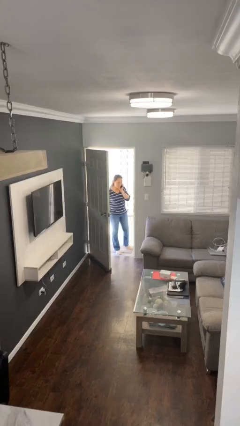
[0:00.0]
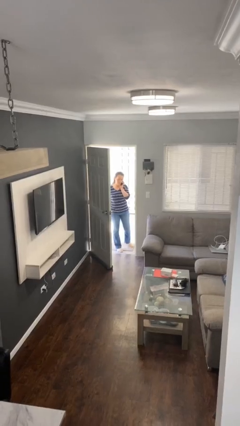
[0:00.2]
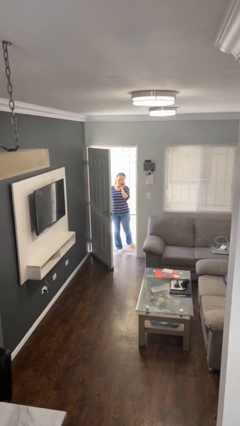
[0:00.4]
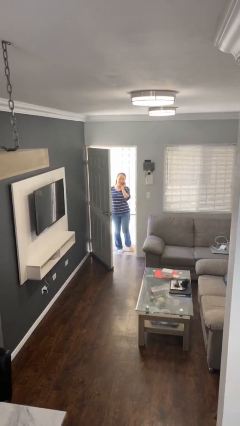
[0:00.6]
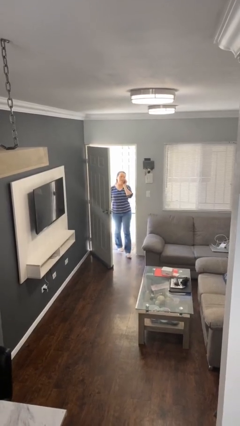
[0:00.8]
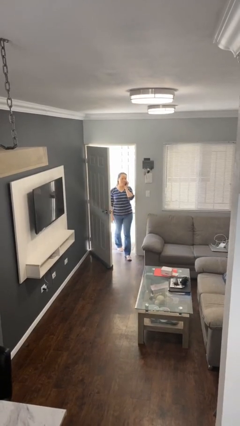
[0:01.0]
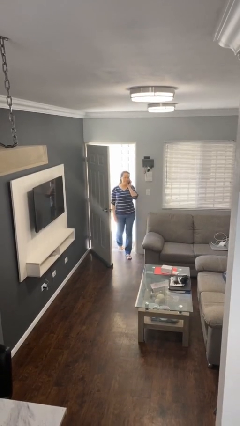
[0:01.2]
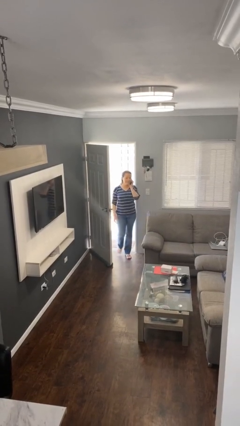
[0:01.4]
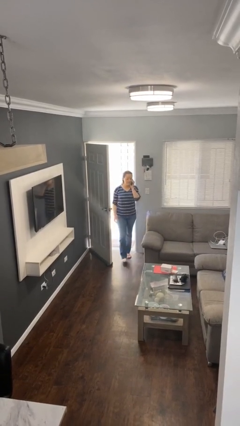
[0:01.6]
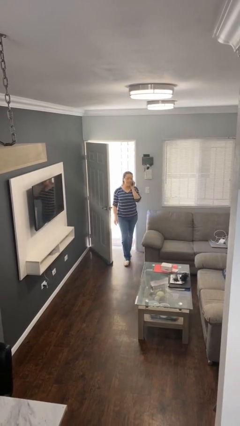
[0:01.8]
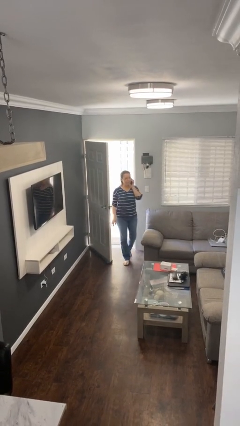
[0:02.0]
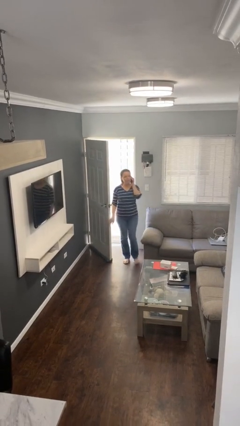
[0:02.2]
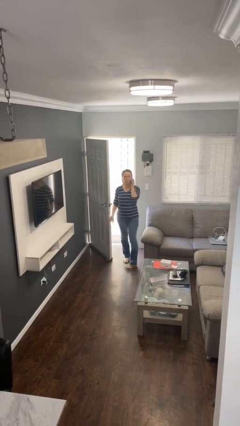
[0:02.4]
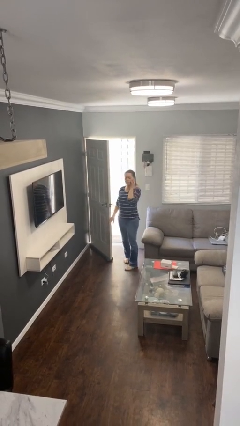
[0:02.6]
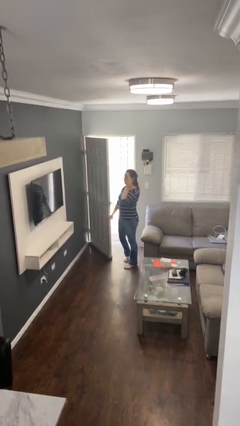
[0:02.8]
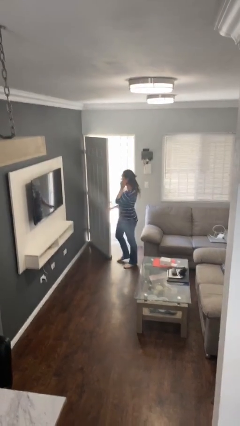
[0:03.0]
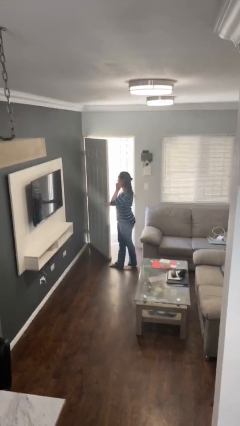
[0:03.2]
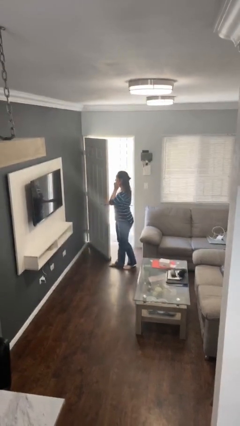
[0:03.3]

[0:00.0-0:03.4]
person enters scene through structure

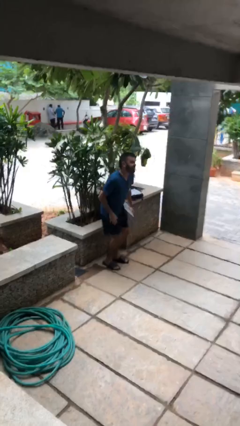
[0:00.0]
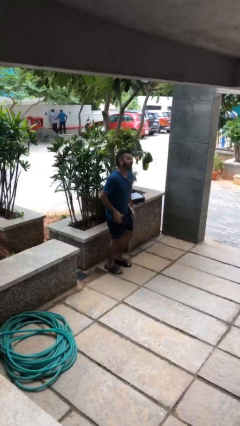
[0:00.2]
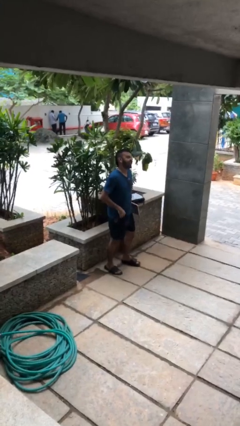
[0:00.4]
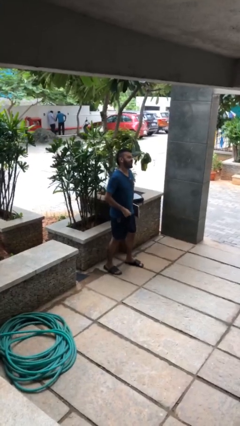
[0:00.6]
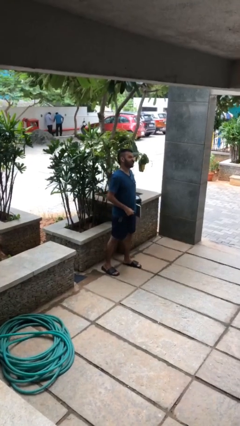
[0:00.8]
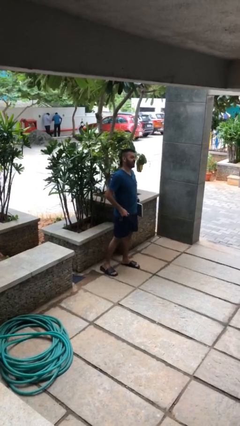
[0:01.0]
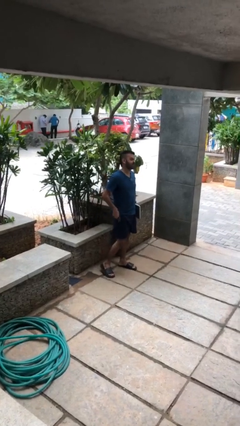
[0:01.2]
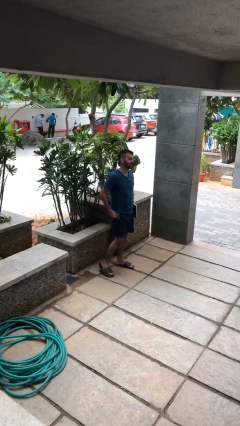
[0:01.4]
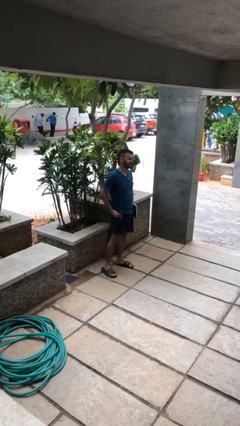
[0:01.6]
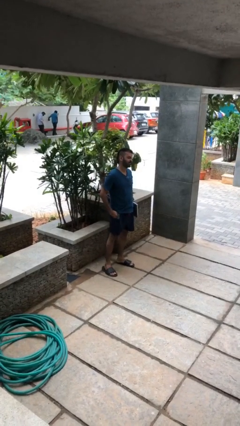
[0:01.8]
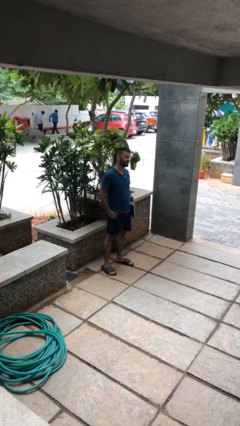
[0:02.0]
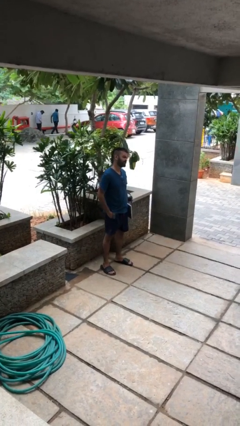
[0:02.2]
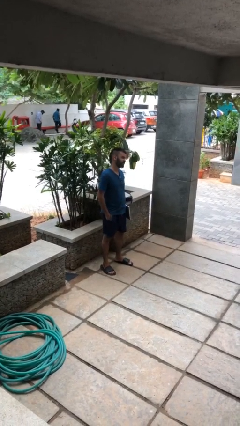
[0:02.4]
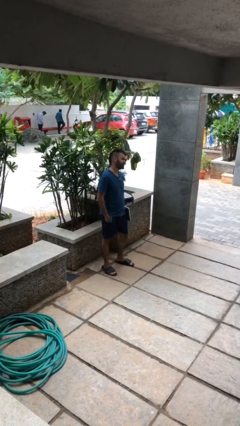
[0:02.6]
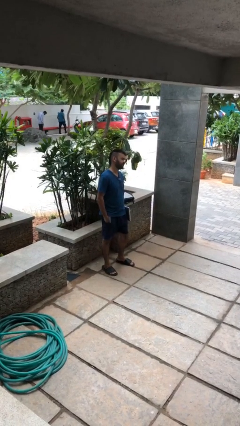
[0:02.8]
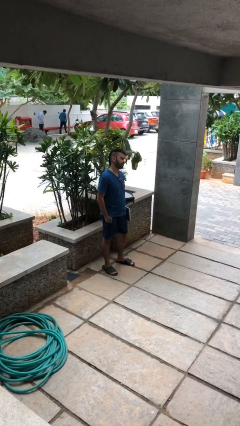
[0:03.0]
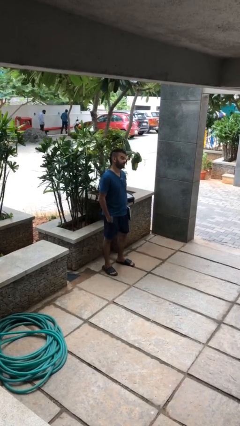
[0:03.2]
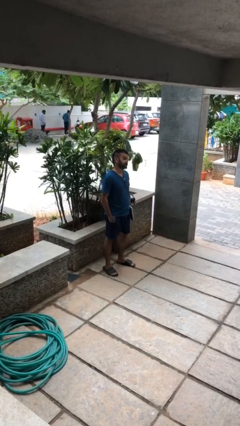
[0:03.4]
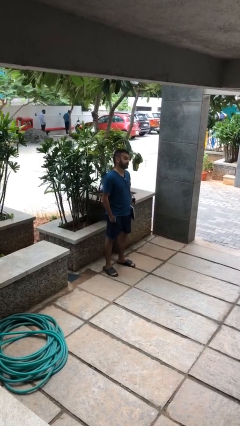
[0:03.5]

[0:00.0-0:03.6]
person stands up

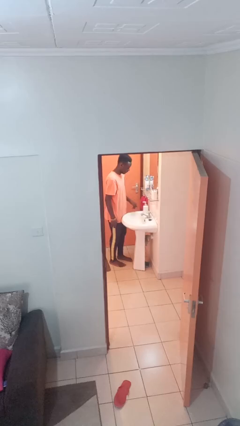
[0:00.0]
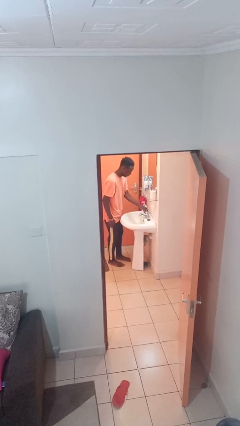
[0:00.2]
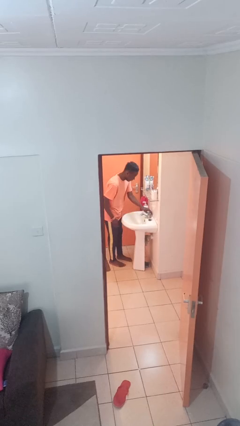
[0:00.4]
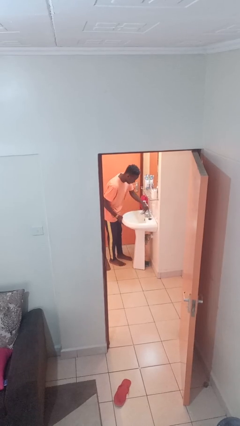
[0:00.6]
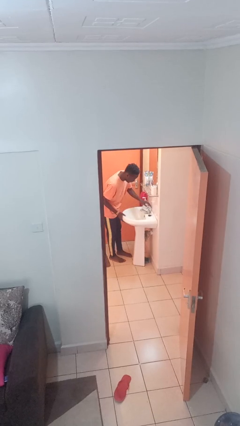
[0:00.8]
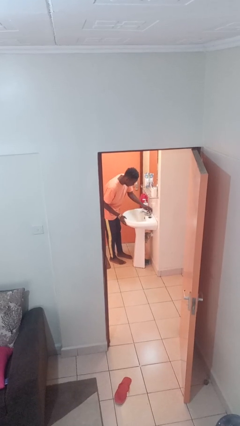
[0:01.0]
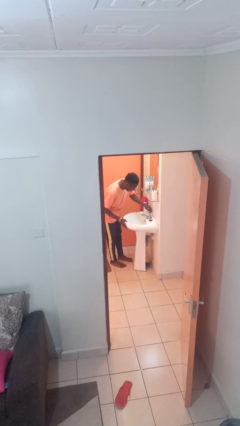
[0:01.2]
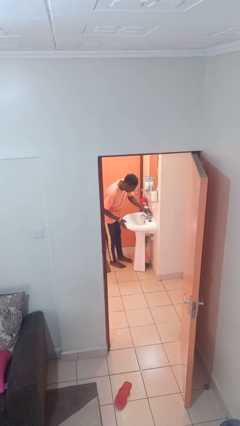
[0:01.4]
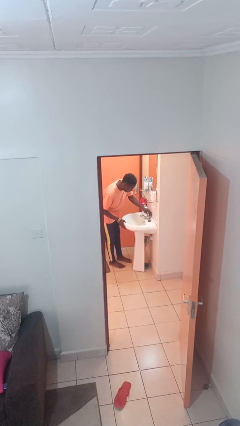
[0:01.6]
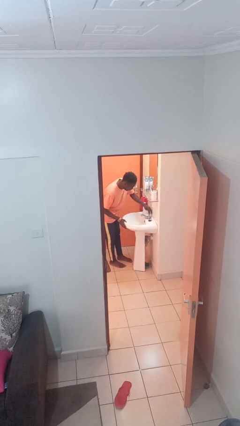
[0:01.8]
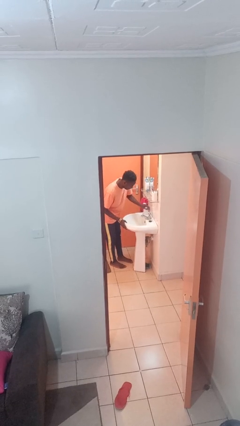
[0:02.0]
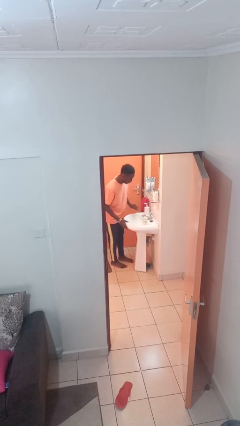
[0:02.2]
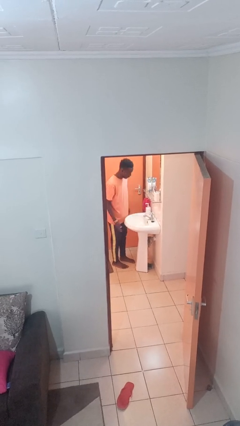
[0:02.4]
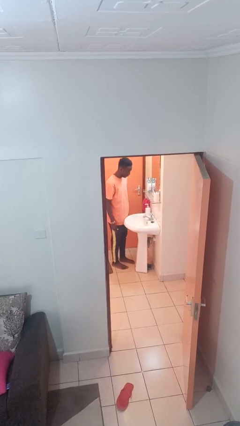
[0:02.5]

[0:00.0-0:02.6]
person turns off faucet

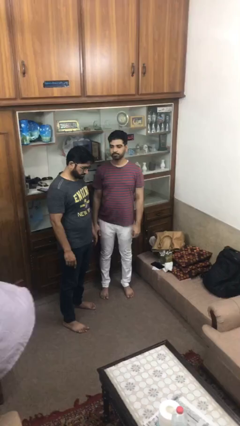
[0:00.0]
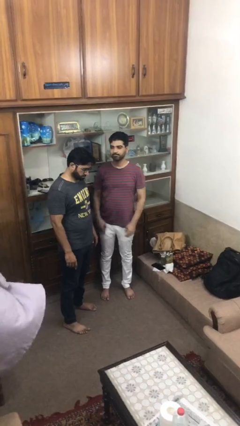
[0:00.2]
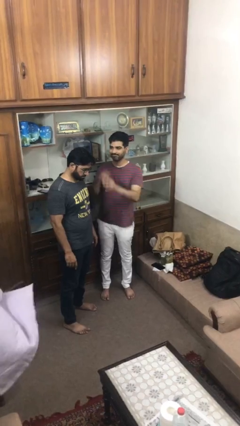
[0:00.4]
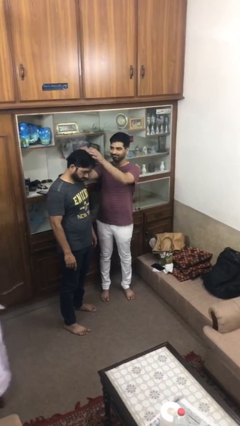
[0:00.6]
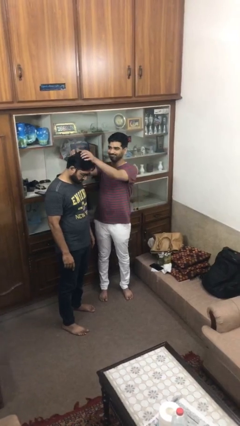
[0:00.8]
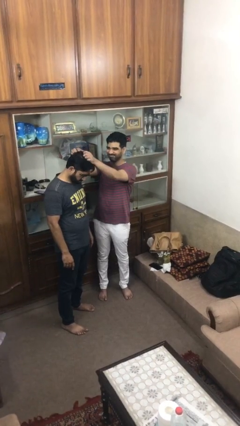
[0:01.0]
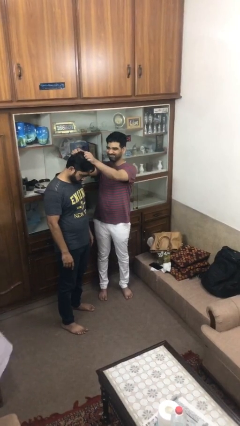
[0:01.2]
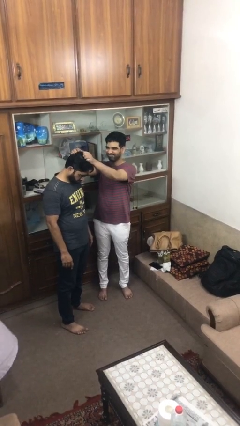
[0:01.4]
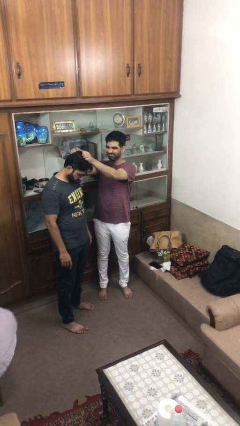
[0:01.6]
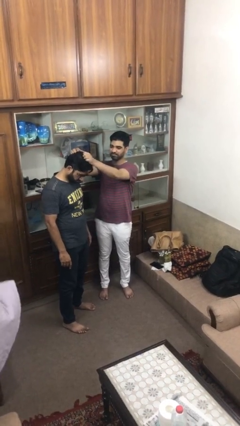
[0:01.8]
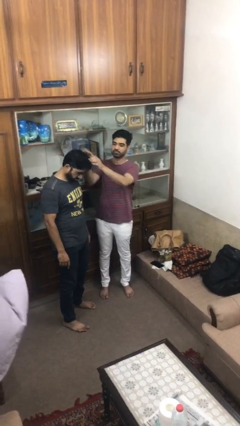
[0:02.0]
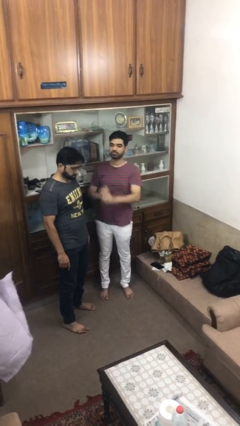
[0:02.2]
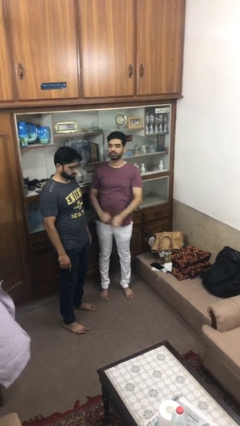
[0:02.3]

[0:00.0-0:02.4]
person grabs person by hair

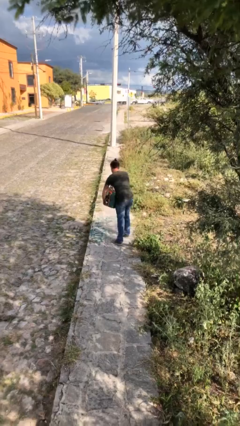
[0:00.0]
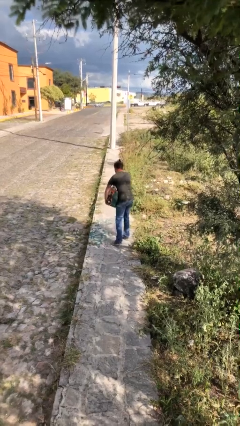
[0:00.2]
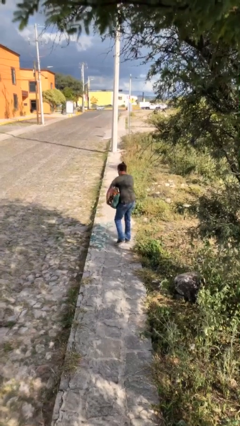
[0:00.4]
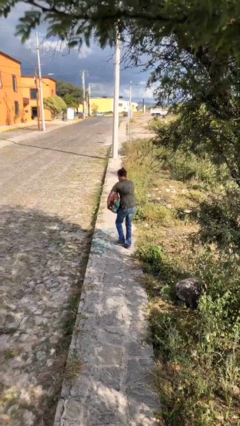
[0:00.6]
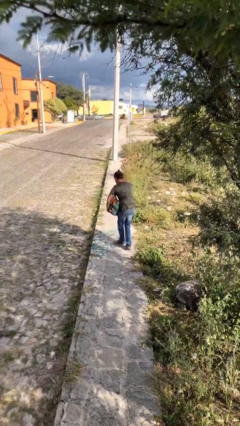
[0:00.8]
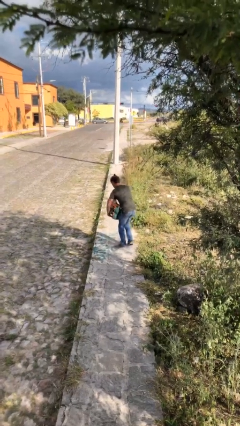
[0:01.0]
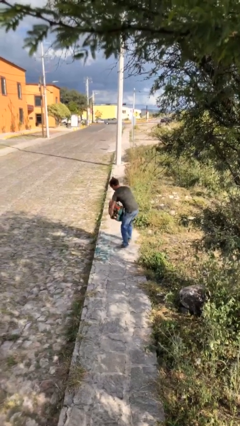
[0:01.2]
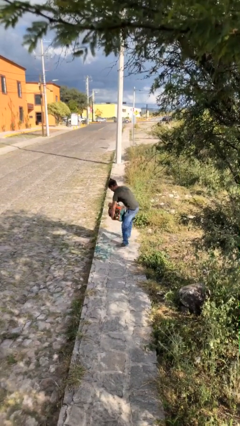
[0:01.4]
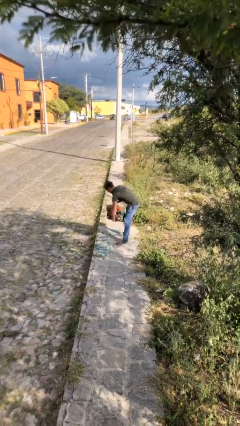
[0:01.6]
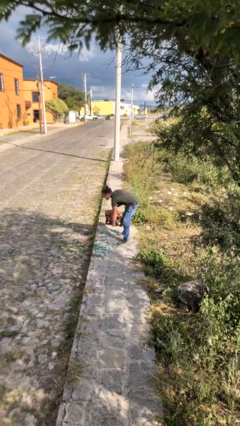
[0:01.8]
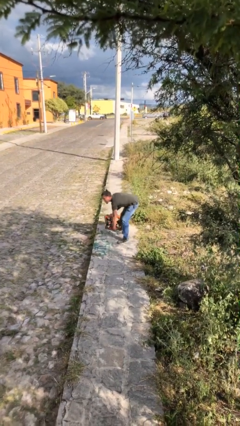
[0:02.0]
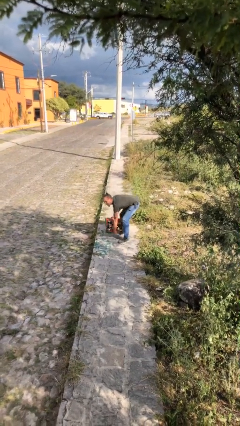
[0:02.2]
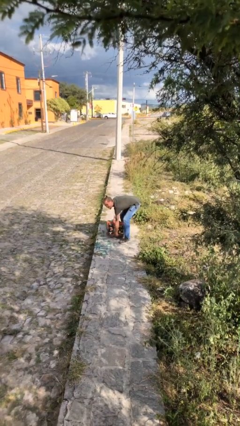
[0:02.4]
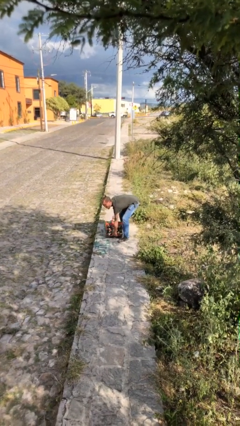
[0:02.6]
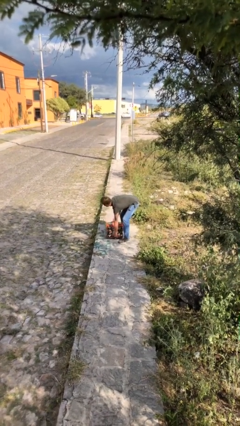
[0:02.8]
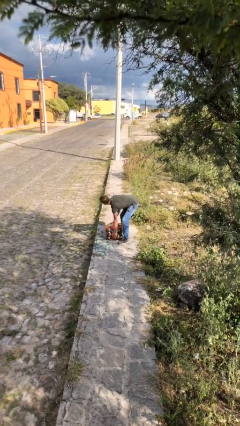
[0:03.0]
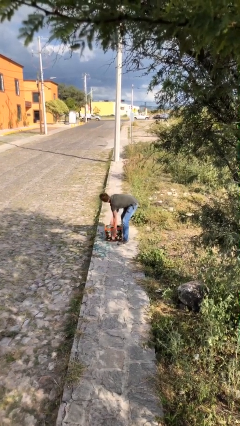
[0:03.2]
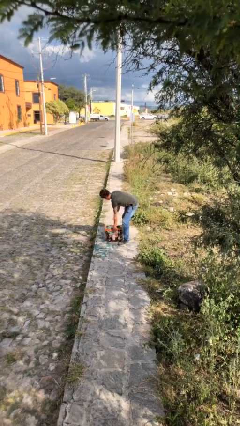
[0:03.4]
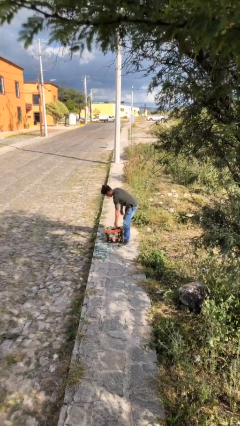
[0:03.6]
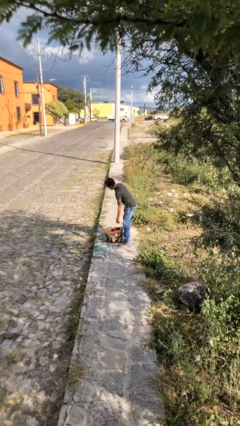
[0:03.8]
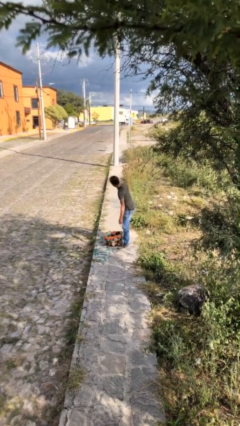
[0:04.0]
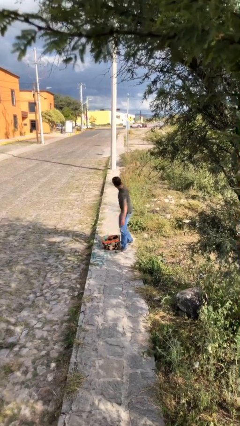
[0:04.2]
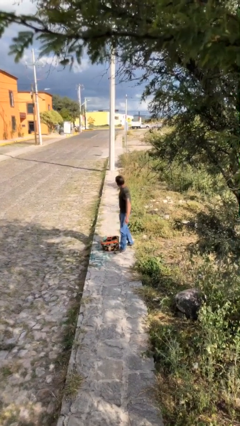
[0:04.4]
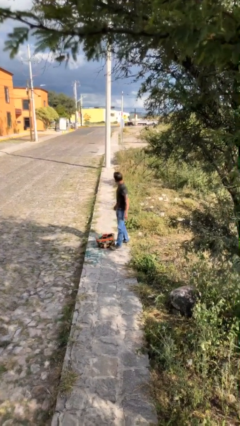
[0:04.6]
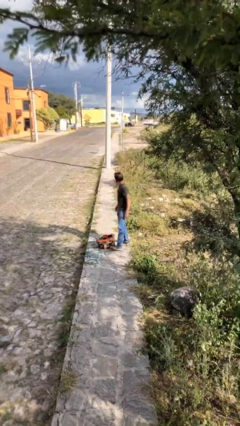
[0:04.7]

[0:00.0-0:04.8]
person puts down object on floor

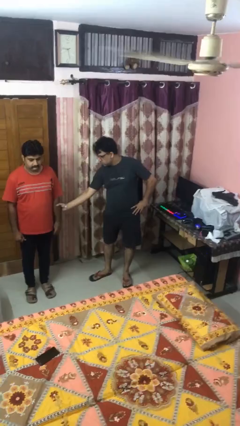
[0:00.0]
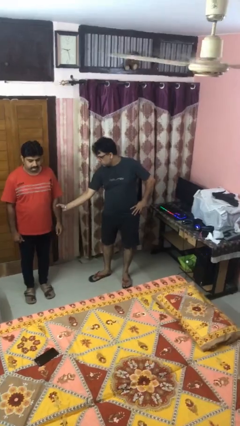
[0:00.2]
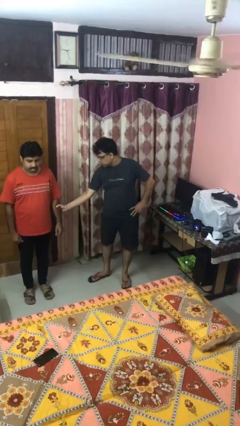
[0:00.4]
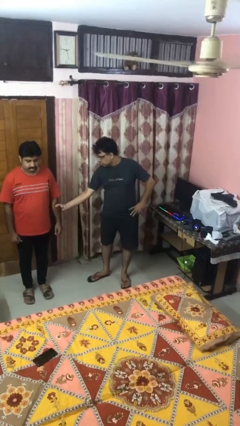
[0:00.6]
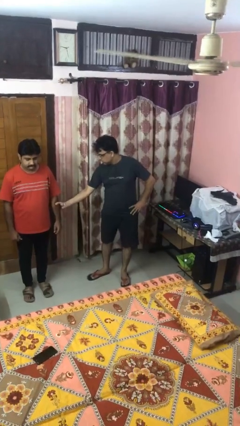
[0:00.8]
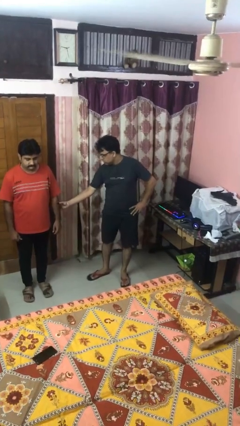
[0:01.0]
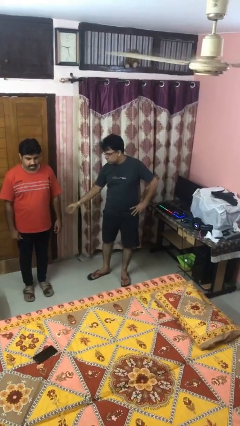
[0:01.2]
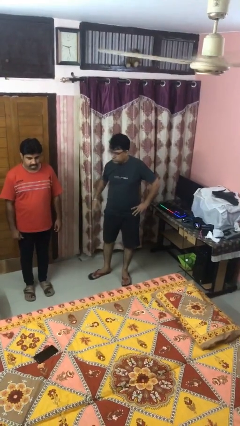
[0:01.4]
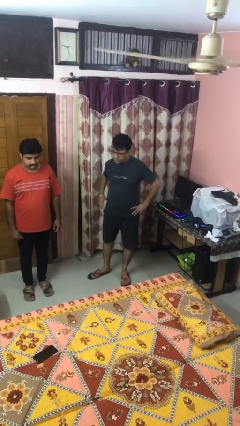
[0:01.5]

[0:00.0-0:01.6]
person grabs person by forearm
